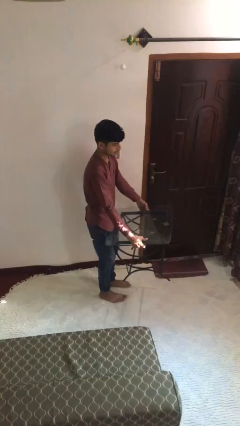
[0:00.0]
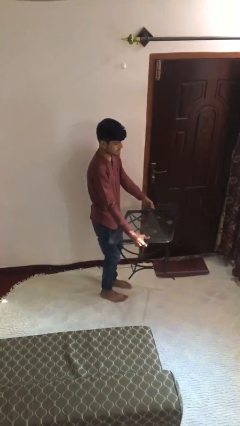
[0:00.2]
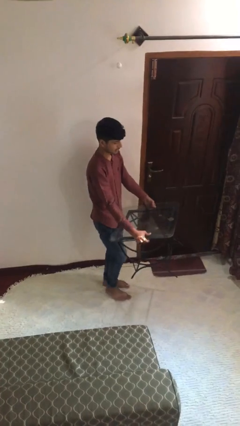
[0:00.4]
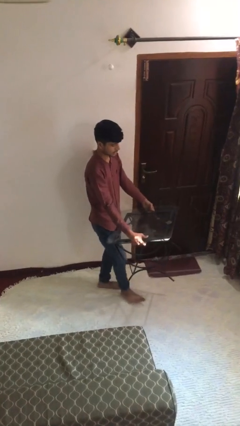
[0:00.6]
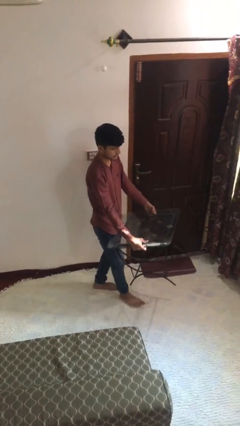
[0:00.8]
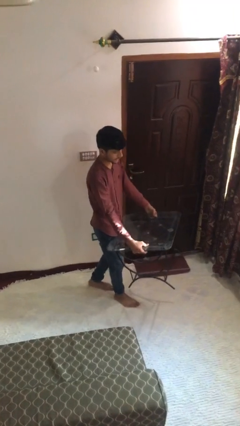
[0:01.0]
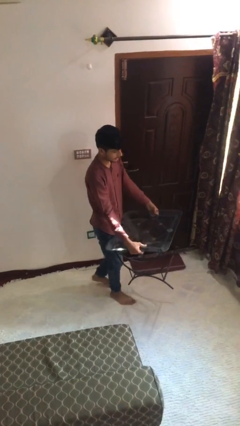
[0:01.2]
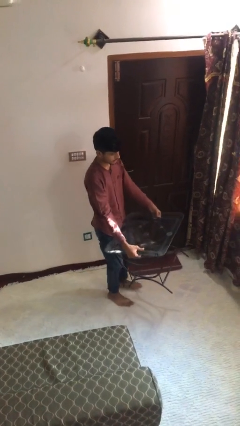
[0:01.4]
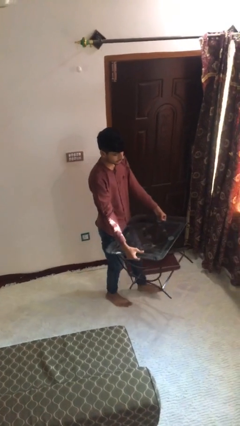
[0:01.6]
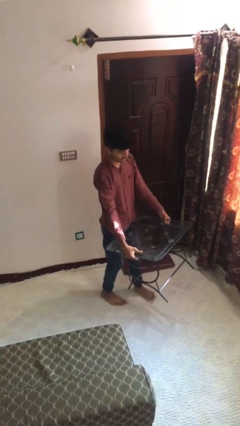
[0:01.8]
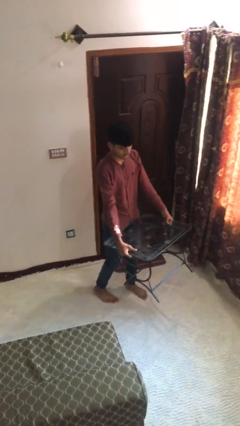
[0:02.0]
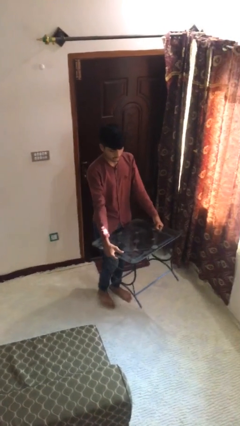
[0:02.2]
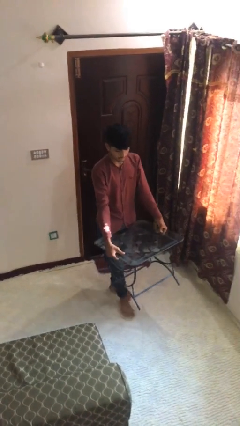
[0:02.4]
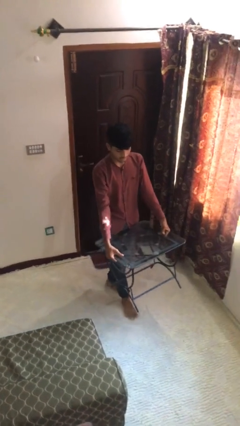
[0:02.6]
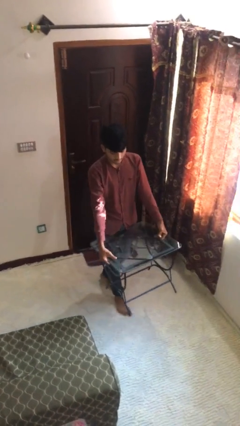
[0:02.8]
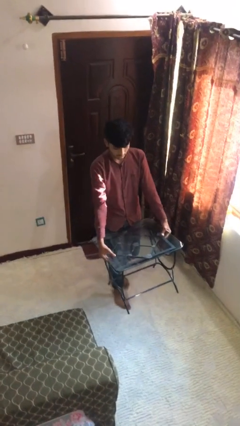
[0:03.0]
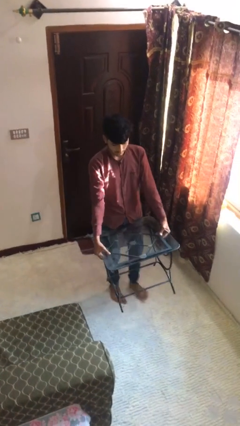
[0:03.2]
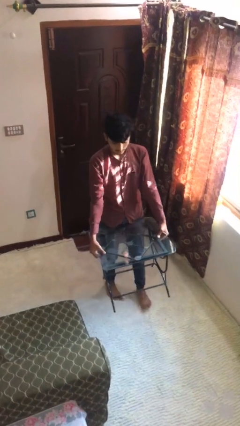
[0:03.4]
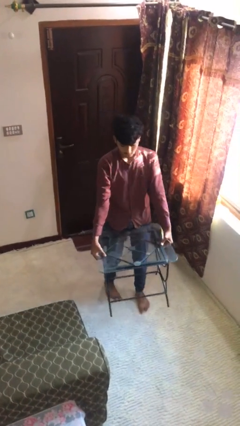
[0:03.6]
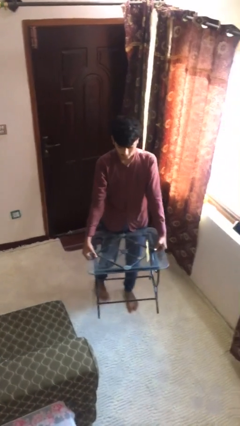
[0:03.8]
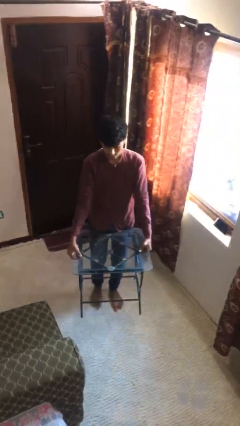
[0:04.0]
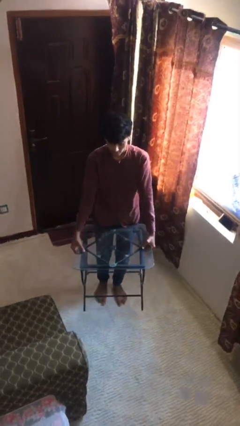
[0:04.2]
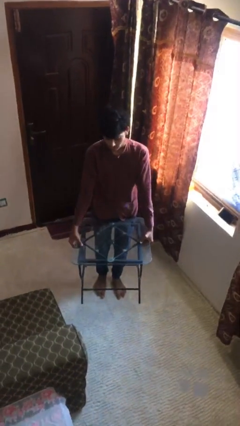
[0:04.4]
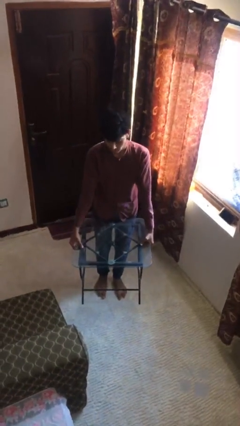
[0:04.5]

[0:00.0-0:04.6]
person carries heavy object

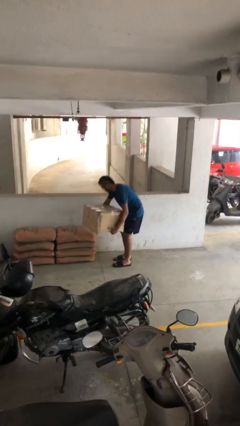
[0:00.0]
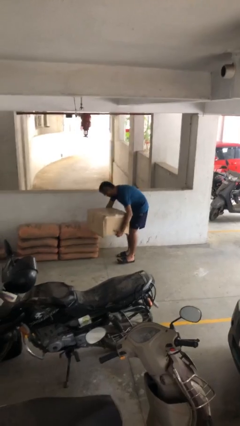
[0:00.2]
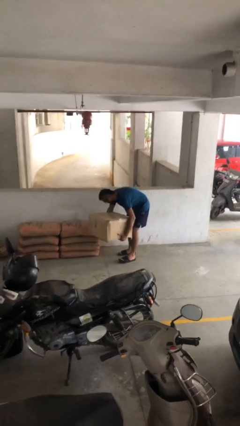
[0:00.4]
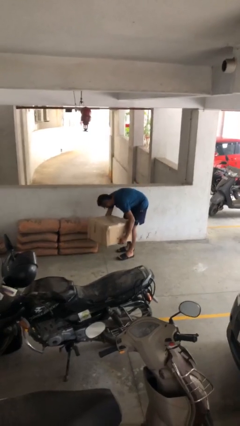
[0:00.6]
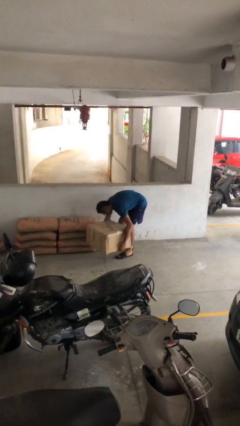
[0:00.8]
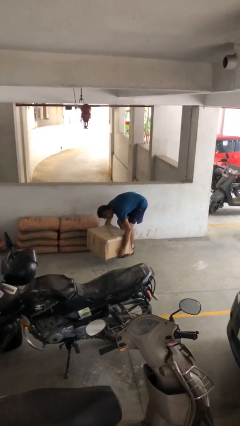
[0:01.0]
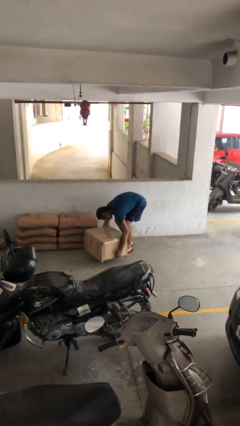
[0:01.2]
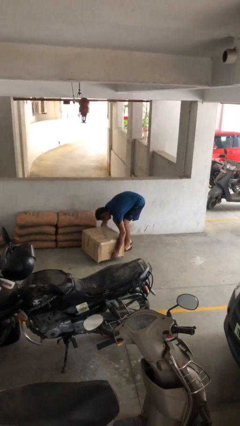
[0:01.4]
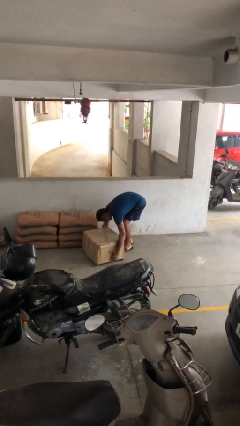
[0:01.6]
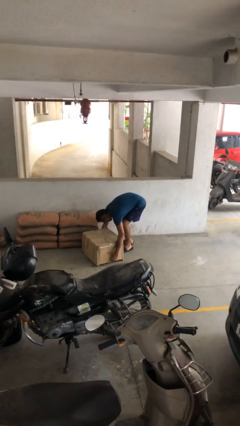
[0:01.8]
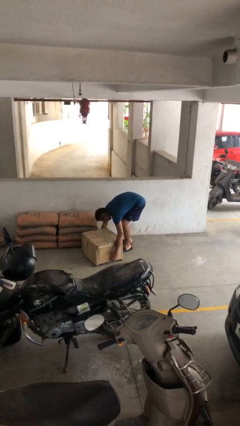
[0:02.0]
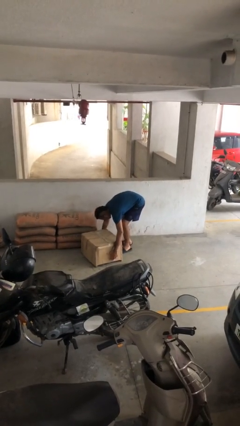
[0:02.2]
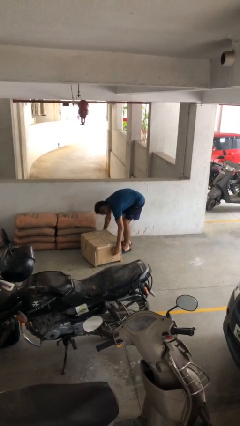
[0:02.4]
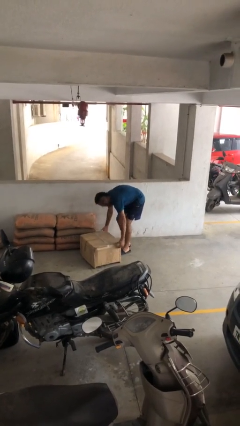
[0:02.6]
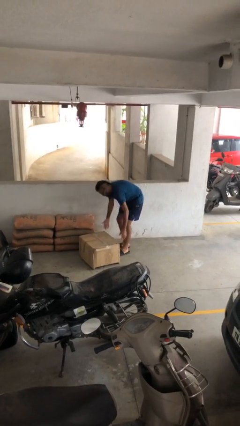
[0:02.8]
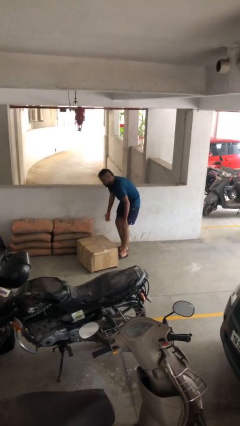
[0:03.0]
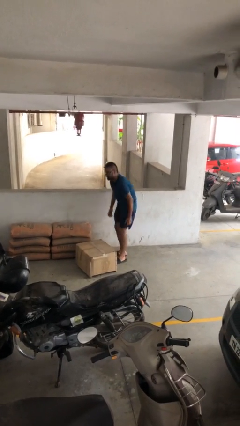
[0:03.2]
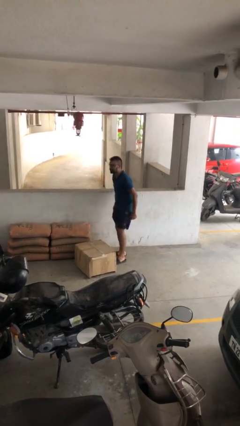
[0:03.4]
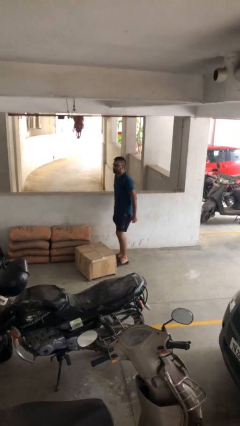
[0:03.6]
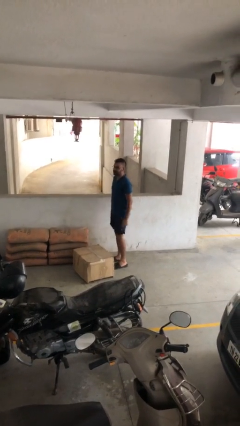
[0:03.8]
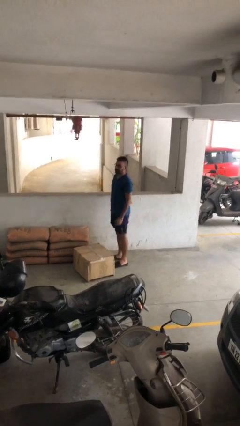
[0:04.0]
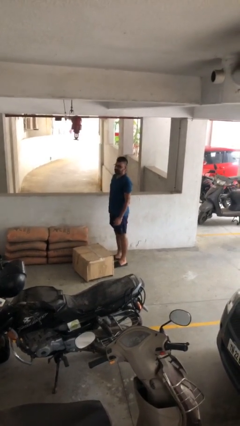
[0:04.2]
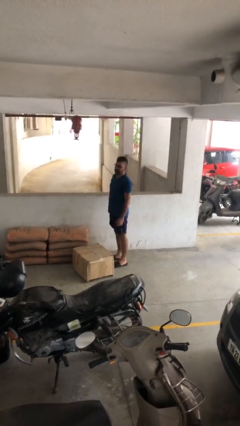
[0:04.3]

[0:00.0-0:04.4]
person puts down object on floor

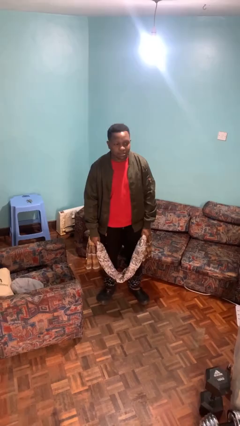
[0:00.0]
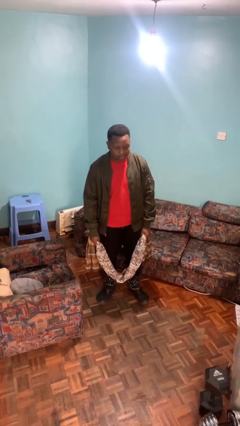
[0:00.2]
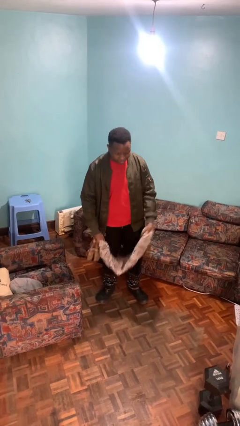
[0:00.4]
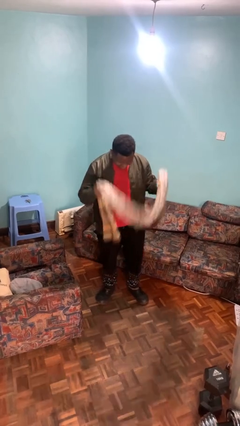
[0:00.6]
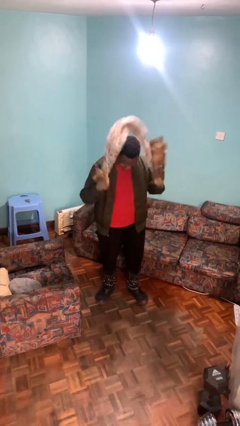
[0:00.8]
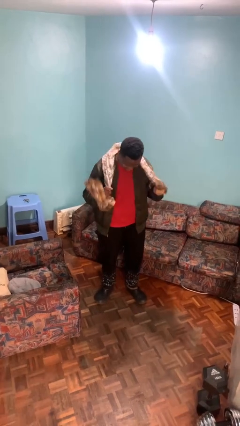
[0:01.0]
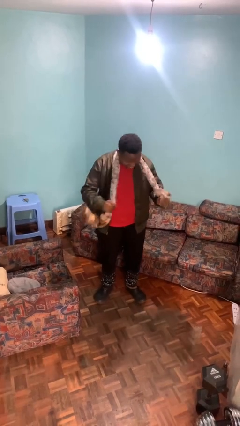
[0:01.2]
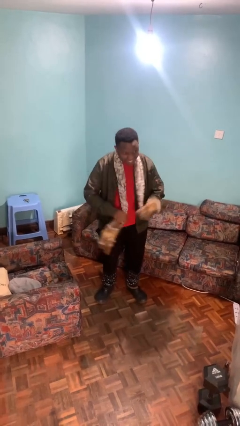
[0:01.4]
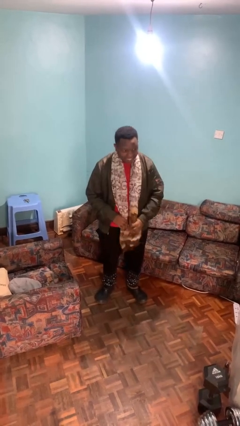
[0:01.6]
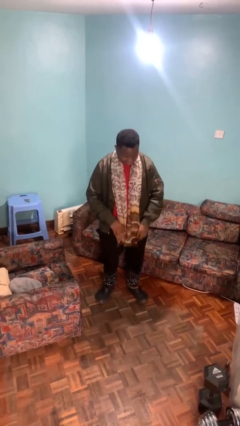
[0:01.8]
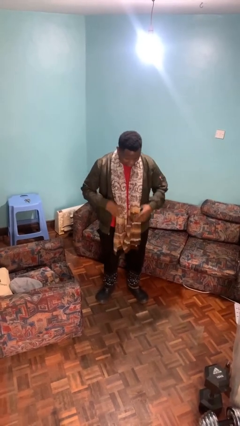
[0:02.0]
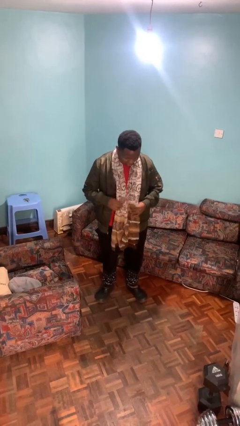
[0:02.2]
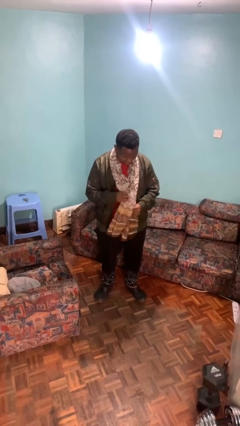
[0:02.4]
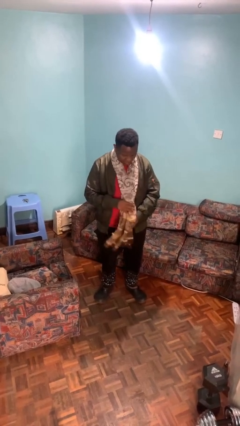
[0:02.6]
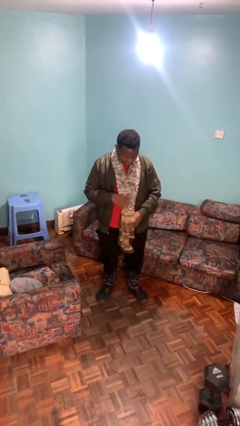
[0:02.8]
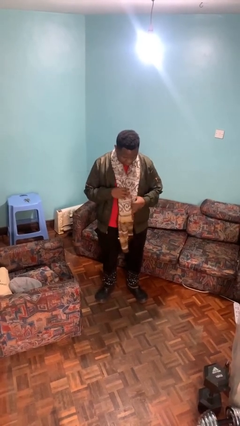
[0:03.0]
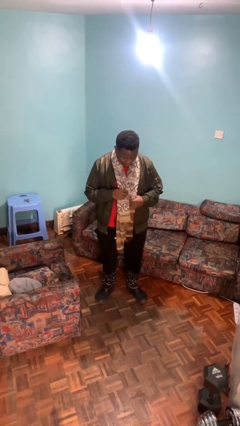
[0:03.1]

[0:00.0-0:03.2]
person puts on scarf

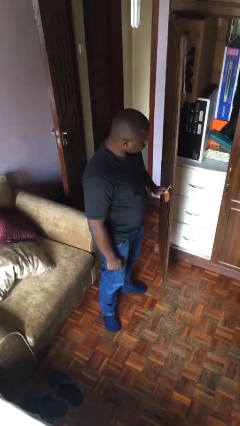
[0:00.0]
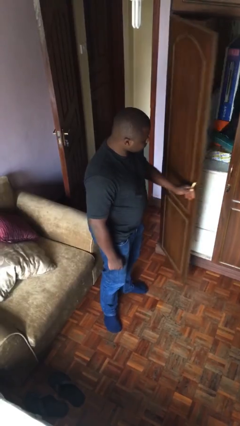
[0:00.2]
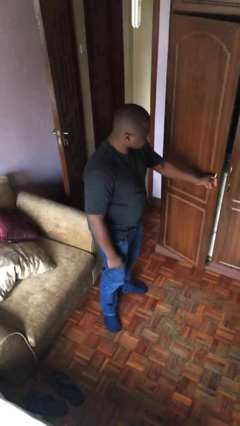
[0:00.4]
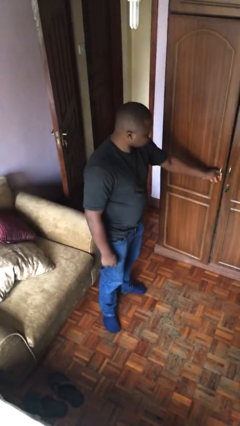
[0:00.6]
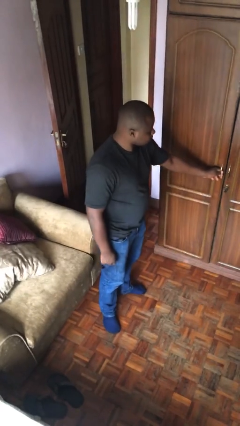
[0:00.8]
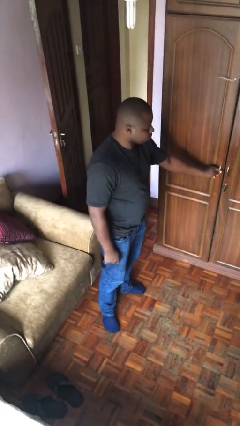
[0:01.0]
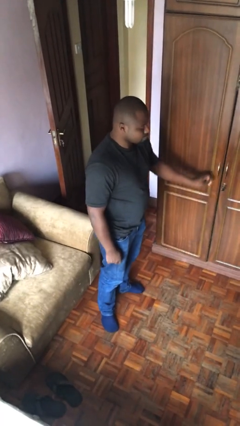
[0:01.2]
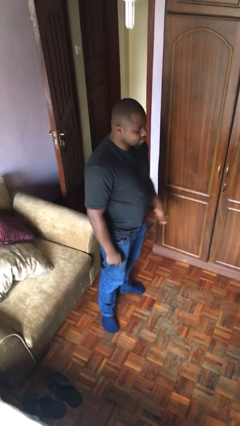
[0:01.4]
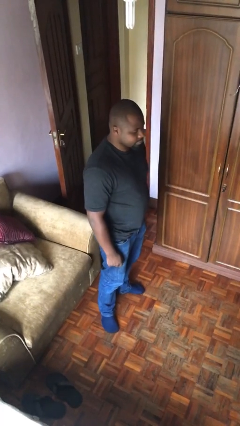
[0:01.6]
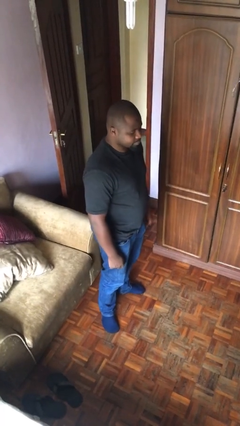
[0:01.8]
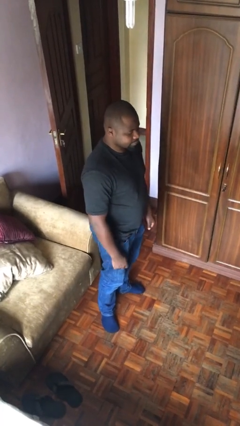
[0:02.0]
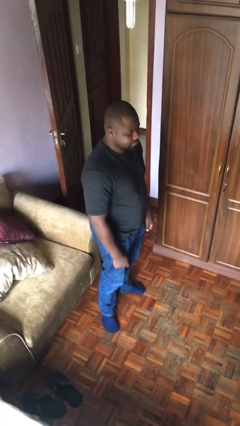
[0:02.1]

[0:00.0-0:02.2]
person closes dresser drawer

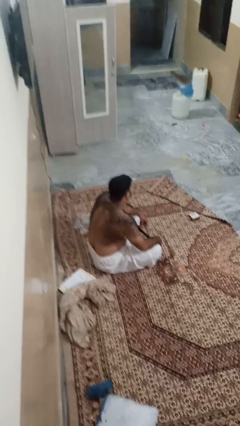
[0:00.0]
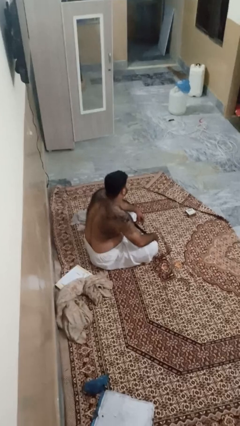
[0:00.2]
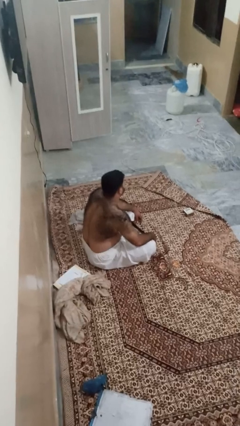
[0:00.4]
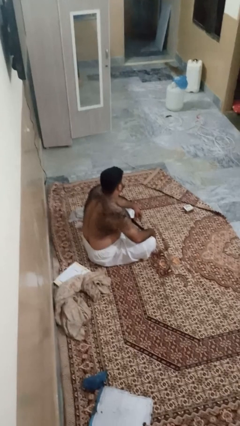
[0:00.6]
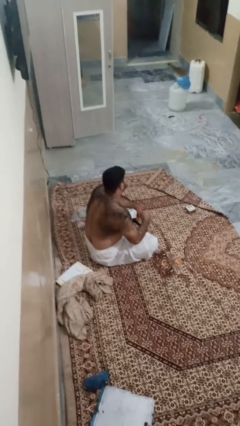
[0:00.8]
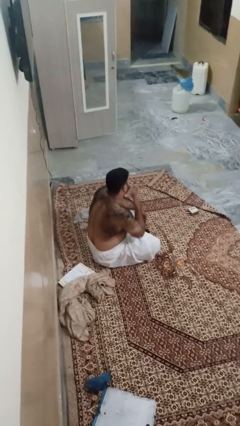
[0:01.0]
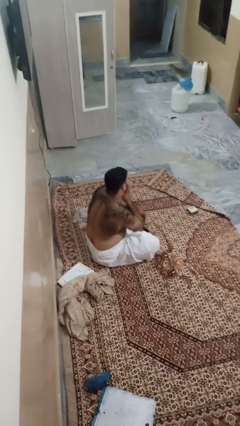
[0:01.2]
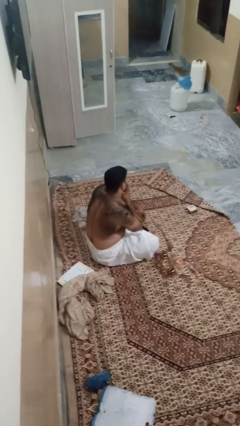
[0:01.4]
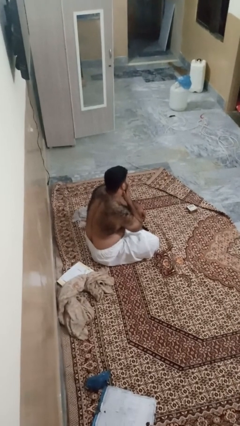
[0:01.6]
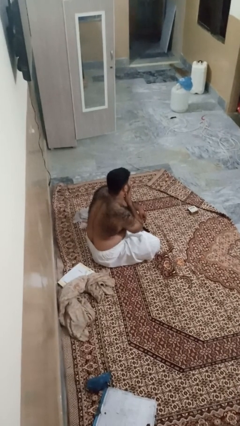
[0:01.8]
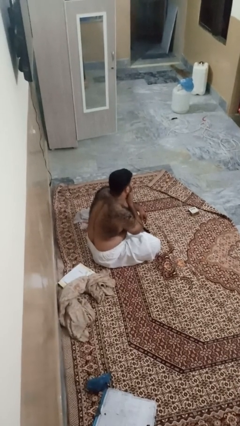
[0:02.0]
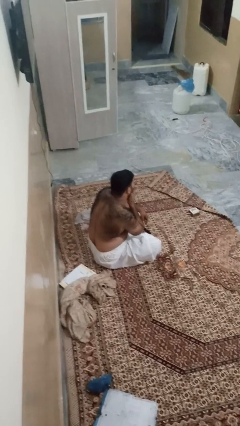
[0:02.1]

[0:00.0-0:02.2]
person strokes chin

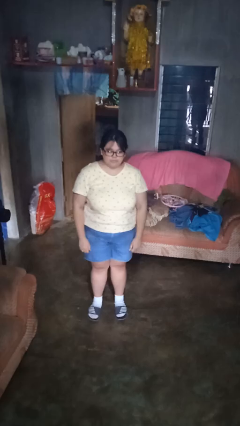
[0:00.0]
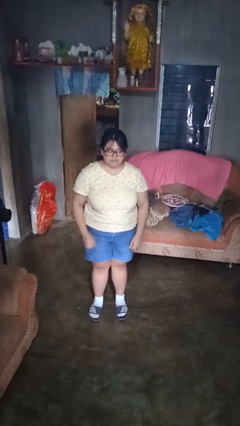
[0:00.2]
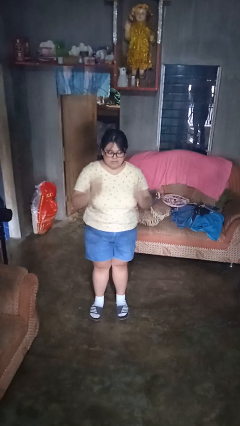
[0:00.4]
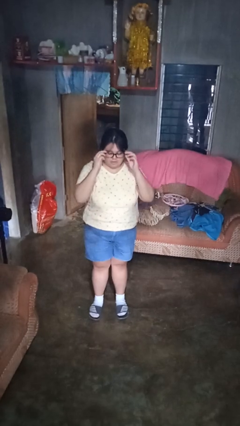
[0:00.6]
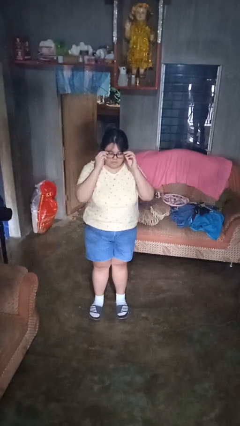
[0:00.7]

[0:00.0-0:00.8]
person takes off glasses
